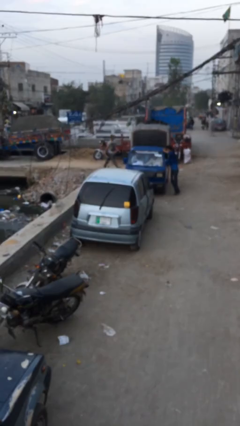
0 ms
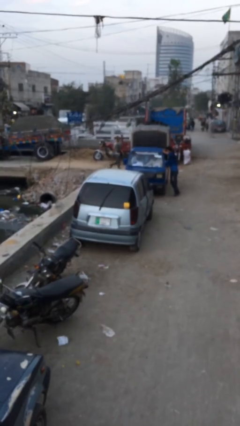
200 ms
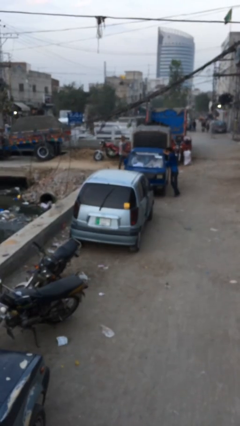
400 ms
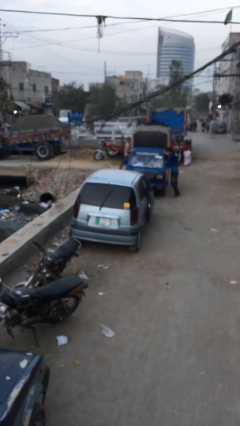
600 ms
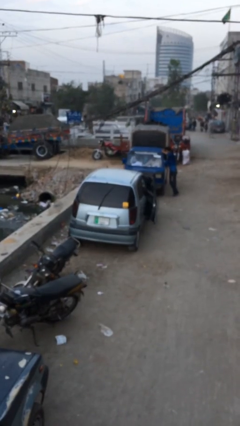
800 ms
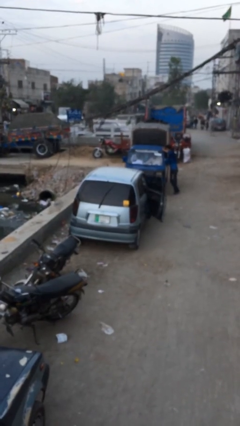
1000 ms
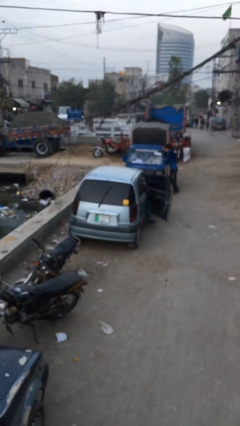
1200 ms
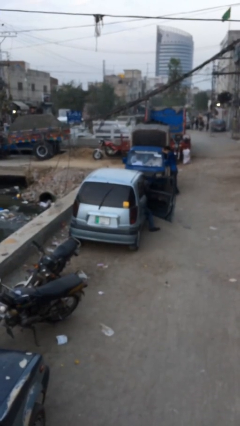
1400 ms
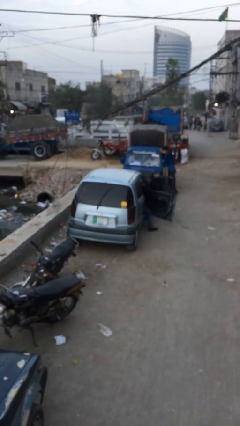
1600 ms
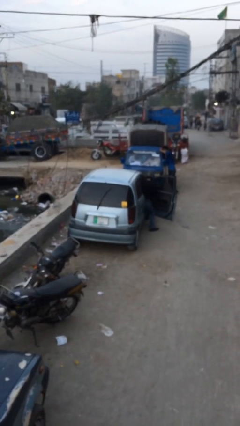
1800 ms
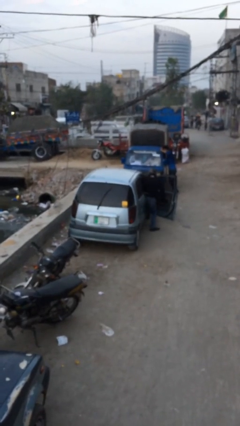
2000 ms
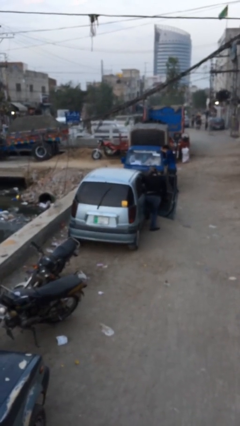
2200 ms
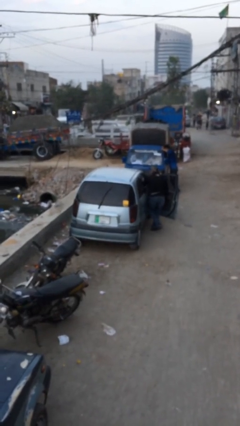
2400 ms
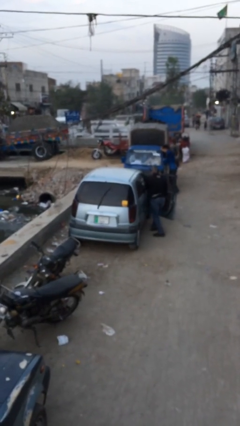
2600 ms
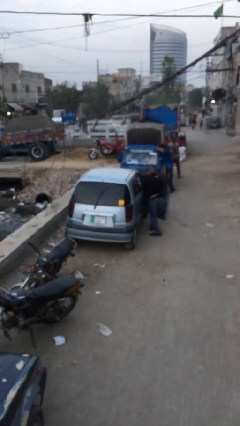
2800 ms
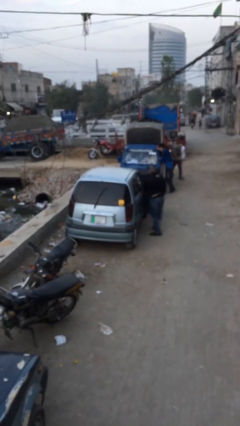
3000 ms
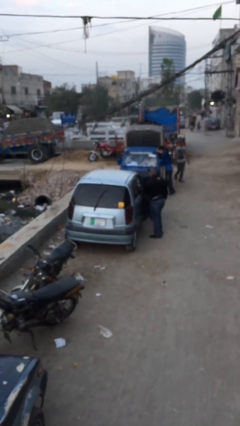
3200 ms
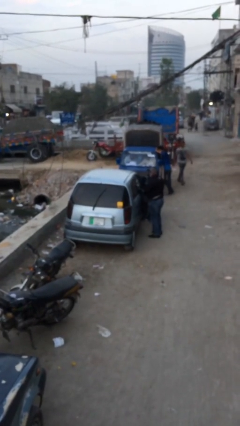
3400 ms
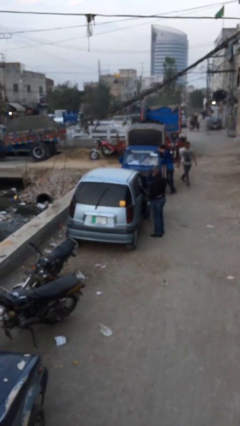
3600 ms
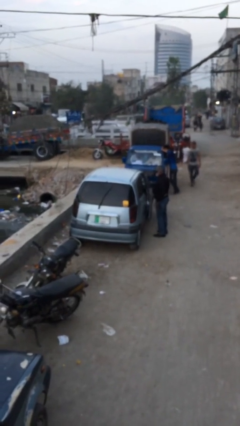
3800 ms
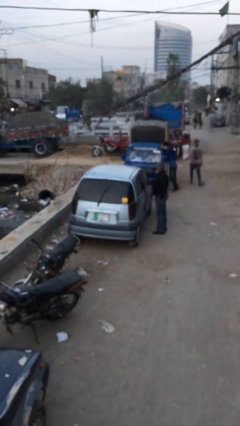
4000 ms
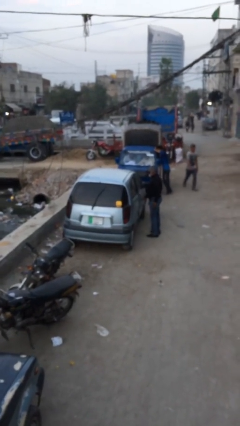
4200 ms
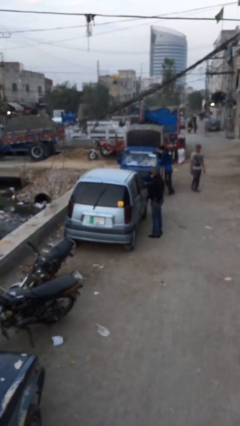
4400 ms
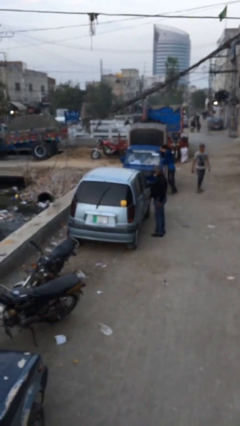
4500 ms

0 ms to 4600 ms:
car drops off person

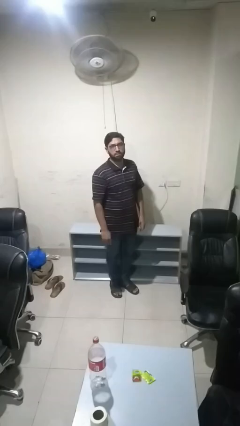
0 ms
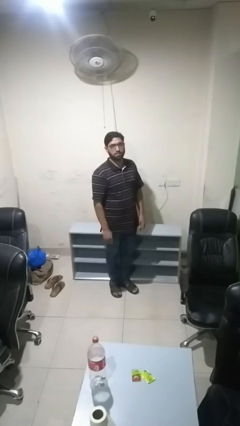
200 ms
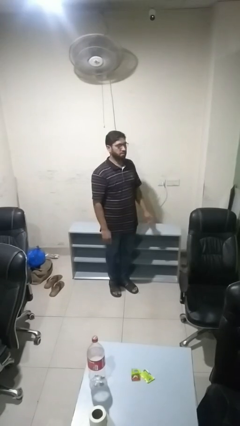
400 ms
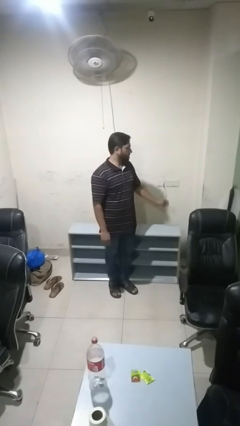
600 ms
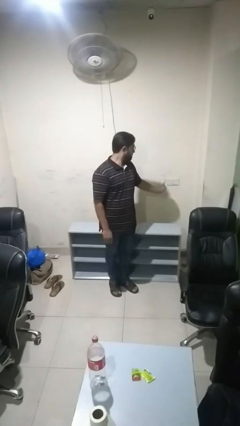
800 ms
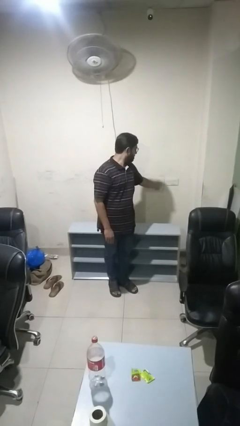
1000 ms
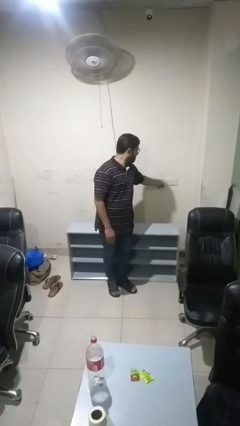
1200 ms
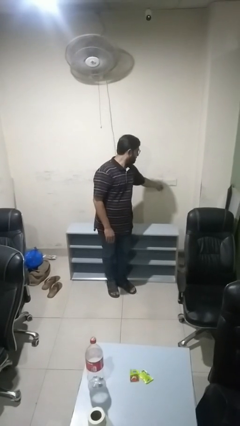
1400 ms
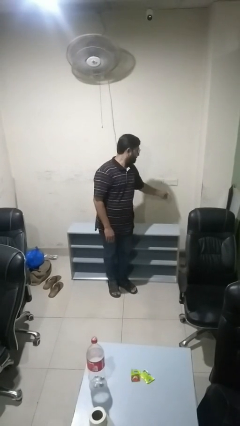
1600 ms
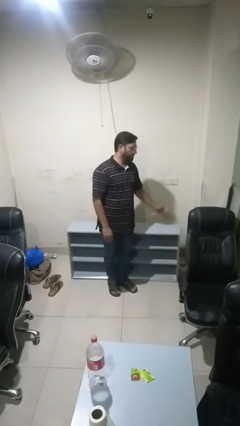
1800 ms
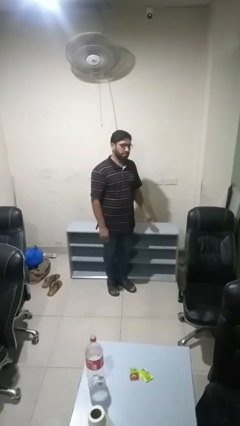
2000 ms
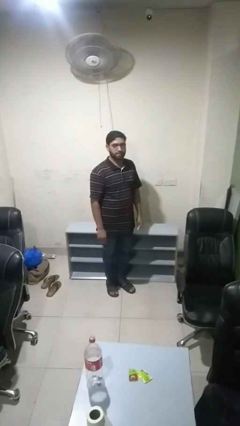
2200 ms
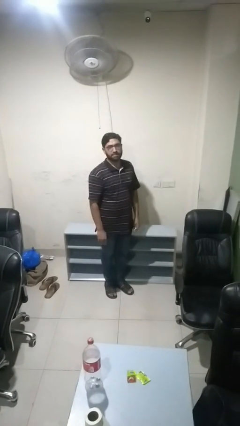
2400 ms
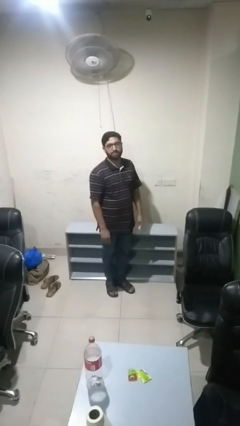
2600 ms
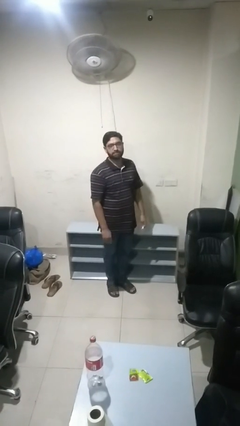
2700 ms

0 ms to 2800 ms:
person unplugs from electrical socket

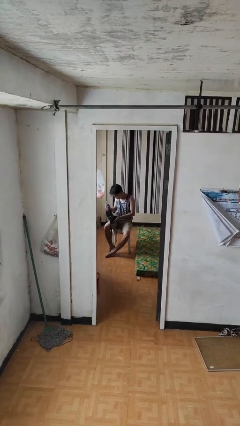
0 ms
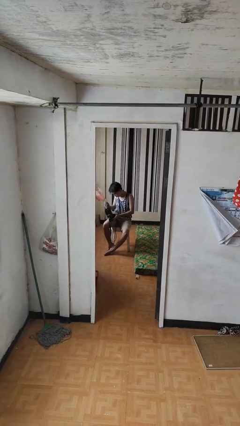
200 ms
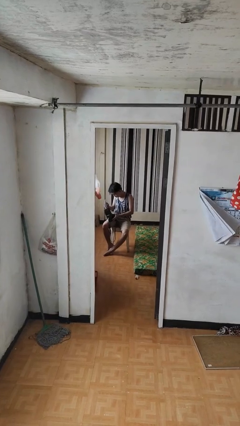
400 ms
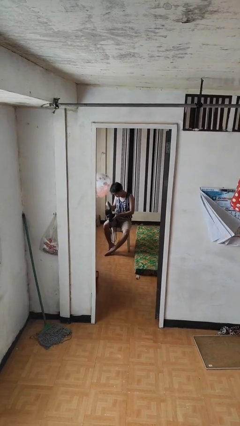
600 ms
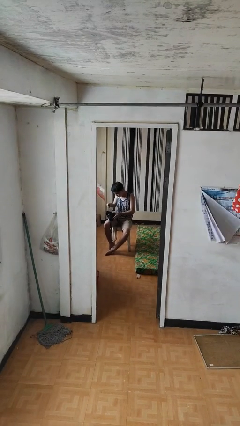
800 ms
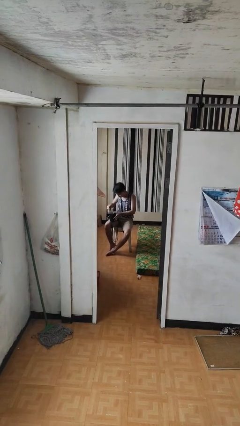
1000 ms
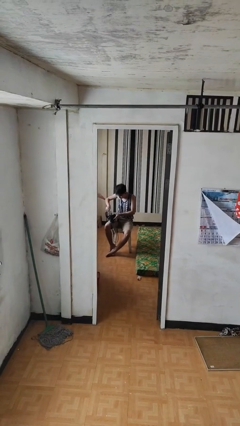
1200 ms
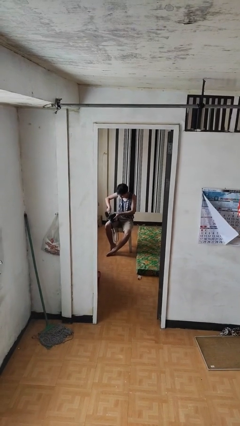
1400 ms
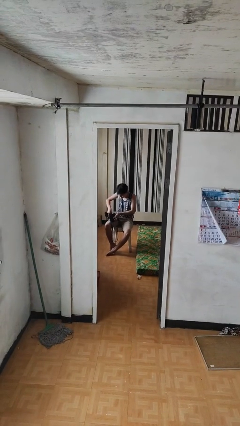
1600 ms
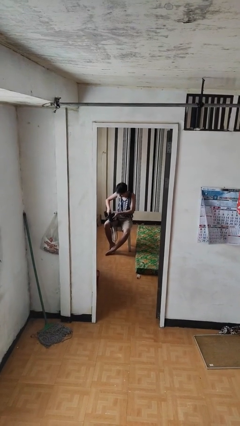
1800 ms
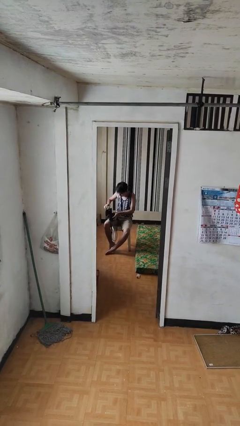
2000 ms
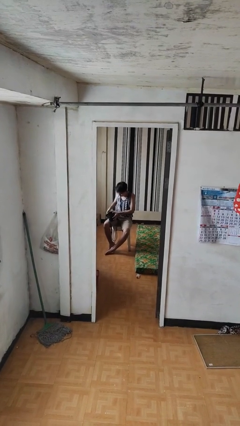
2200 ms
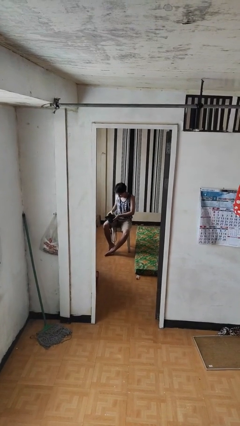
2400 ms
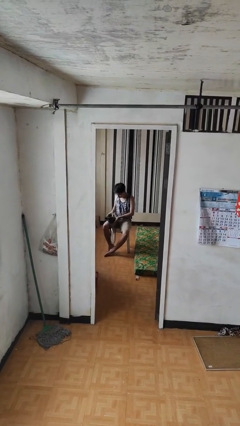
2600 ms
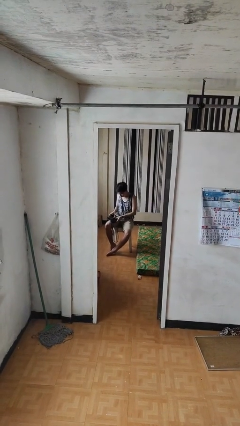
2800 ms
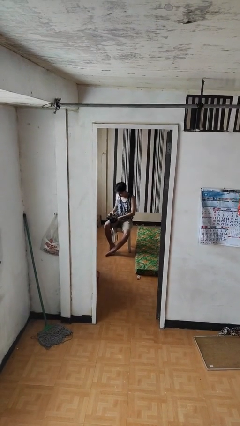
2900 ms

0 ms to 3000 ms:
person puts object into purse

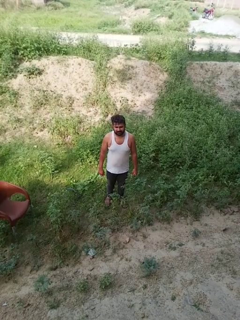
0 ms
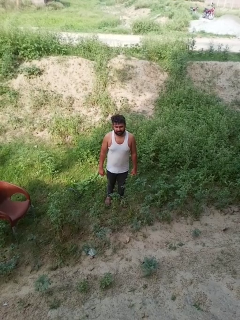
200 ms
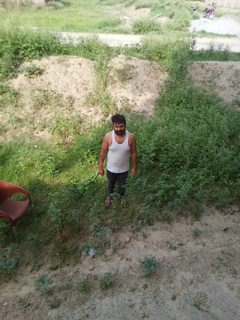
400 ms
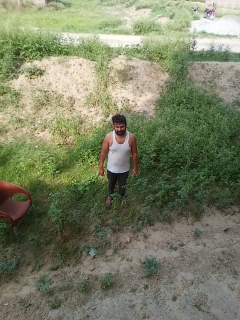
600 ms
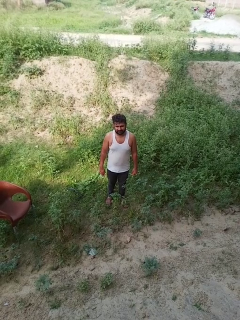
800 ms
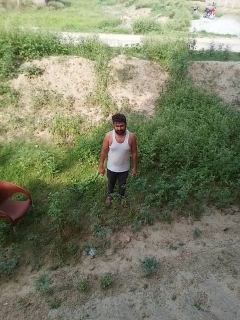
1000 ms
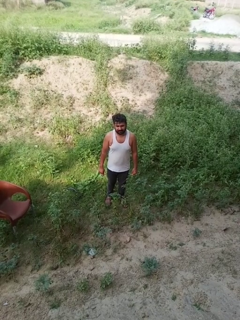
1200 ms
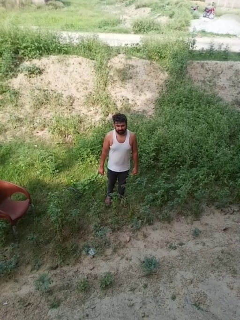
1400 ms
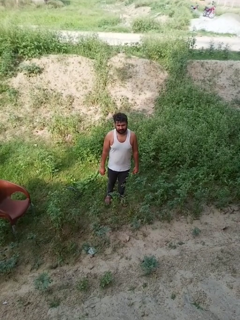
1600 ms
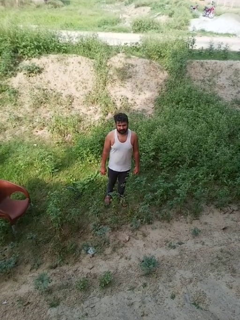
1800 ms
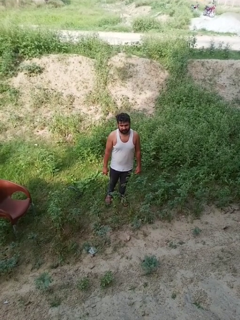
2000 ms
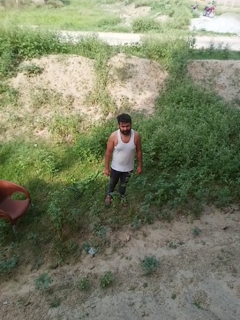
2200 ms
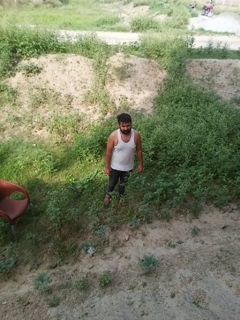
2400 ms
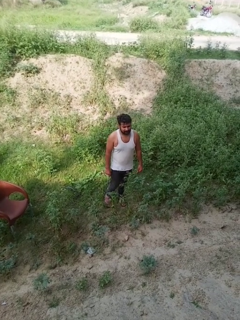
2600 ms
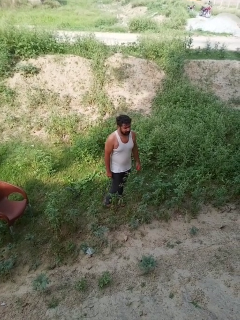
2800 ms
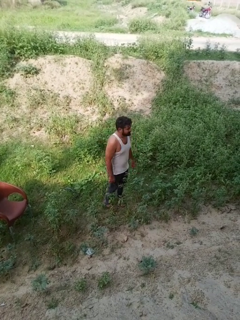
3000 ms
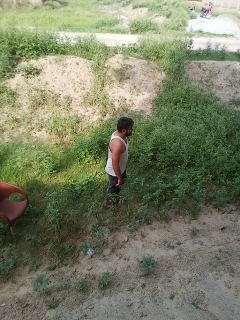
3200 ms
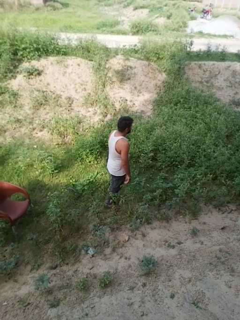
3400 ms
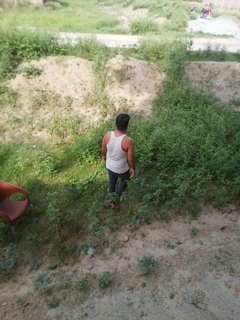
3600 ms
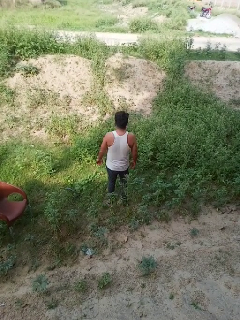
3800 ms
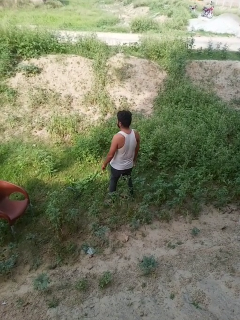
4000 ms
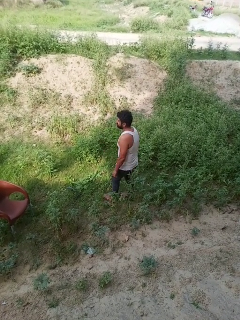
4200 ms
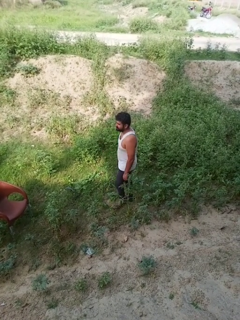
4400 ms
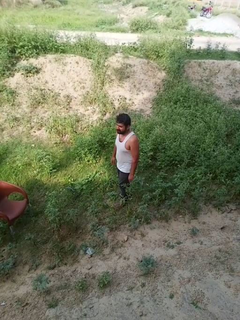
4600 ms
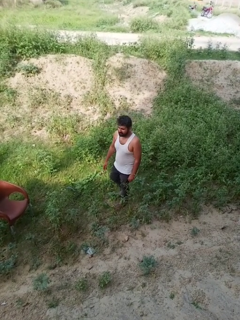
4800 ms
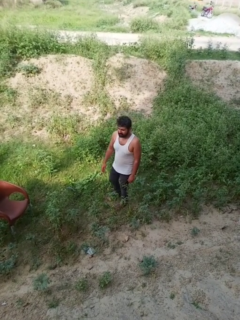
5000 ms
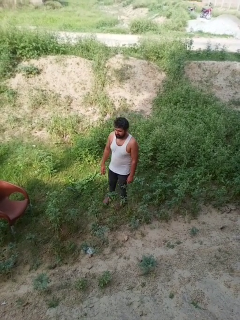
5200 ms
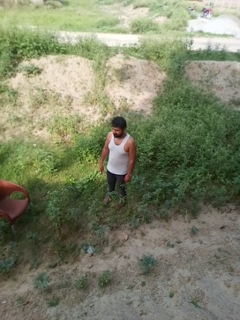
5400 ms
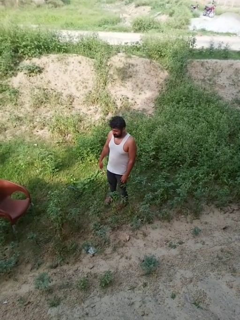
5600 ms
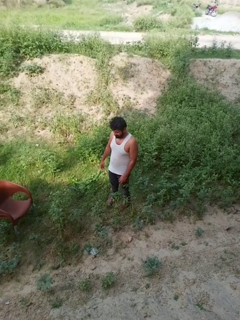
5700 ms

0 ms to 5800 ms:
person twirls

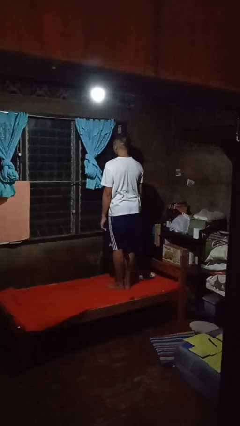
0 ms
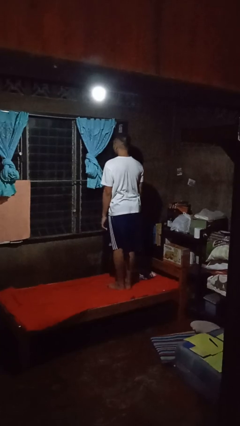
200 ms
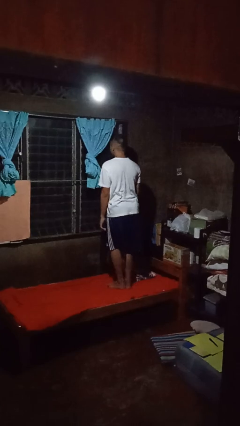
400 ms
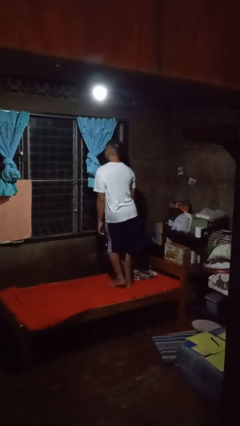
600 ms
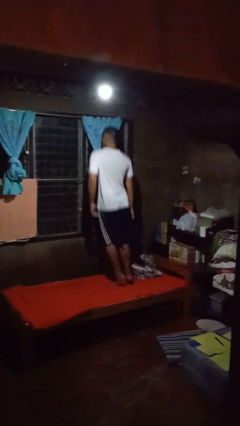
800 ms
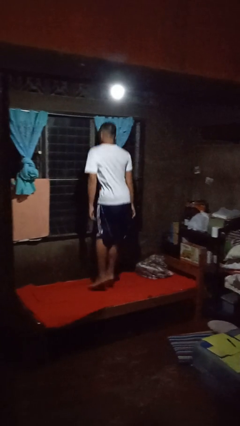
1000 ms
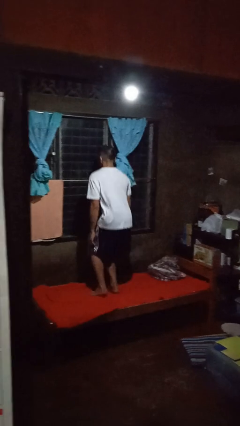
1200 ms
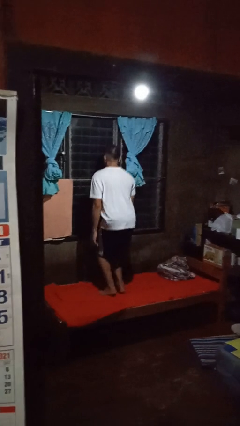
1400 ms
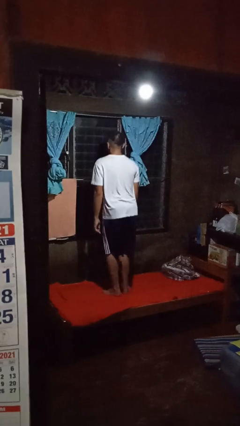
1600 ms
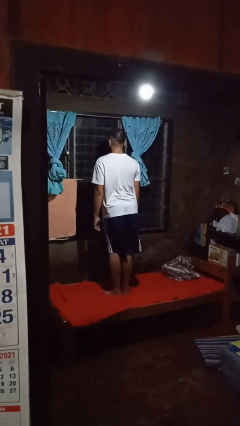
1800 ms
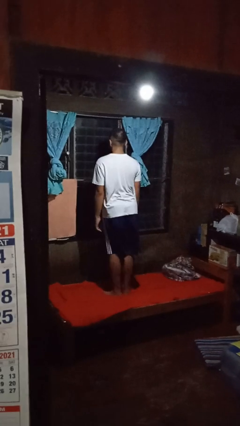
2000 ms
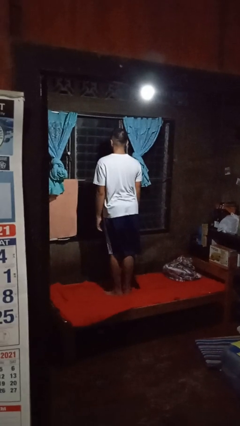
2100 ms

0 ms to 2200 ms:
person jumps on bed

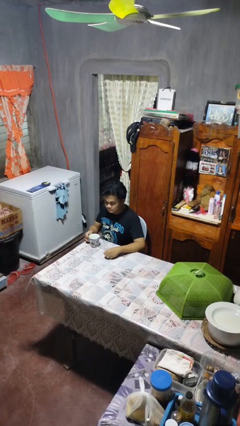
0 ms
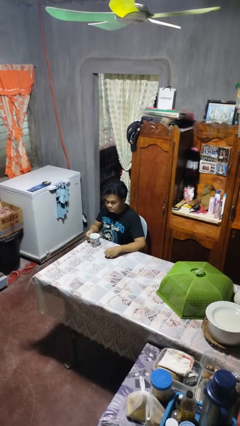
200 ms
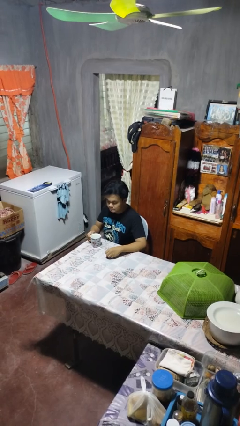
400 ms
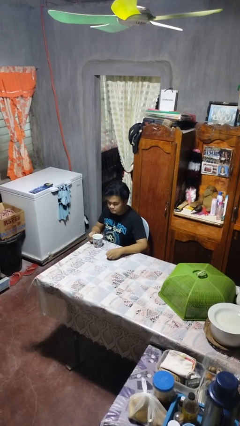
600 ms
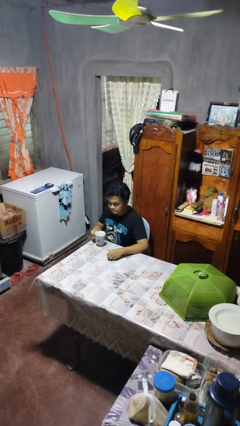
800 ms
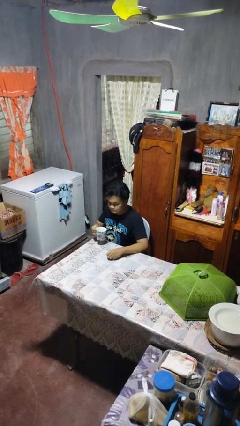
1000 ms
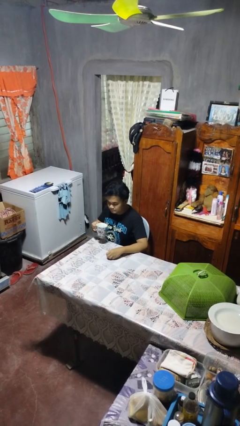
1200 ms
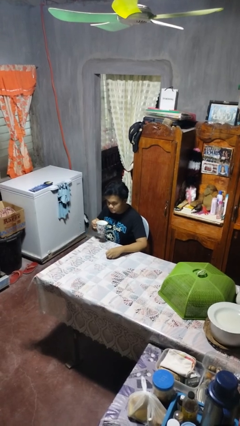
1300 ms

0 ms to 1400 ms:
person picks up object from table
